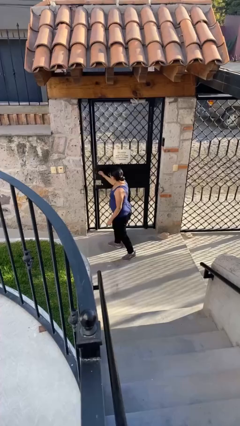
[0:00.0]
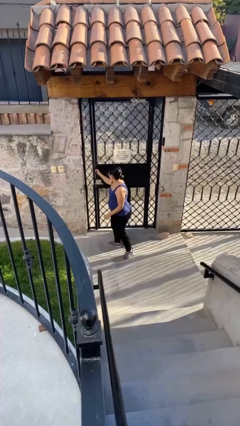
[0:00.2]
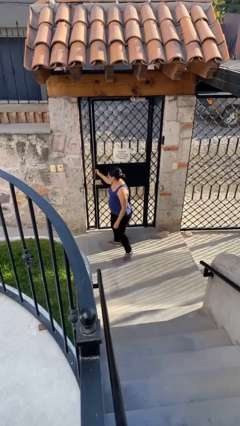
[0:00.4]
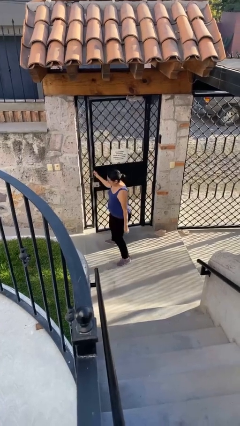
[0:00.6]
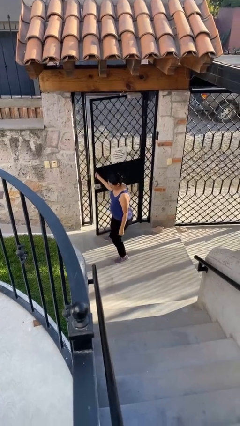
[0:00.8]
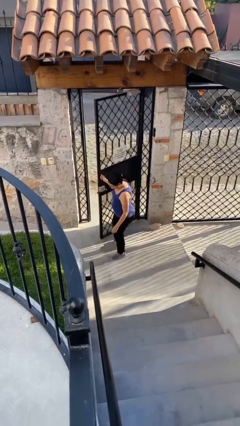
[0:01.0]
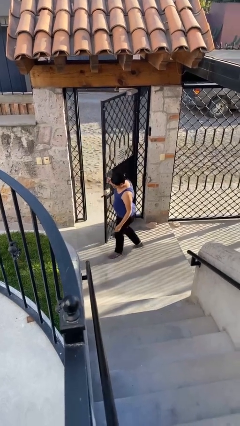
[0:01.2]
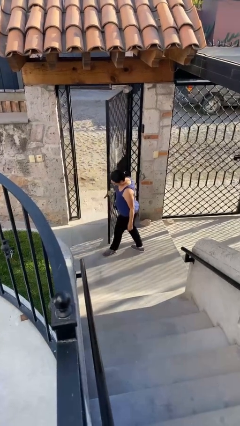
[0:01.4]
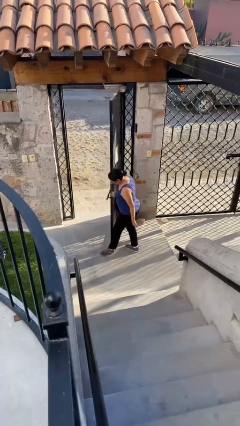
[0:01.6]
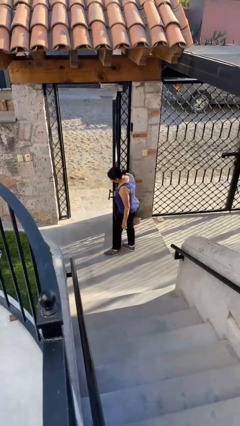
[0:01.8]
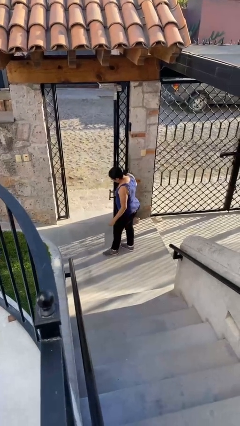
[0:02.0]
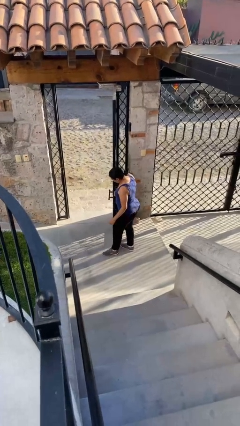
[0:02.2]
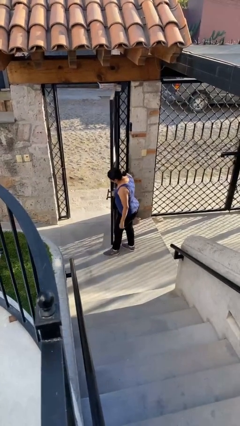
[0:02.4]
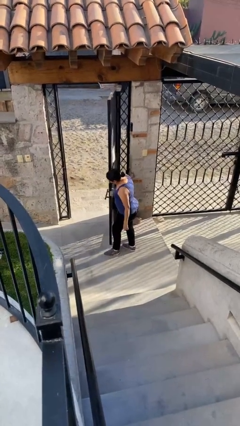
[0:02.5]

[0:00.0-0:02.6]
person opens facility door

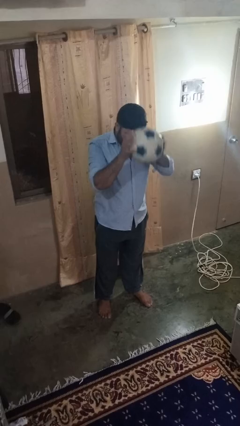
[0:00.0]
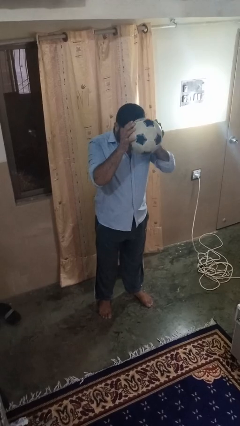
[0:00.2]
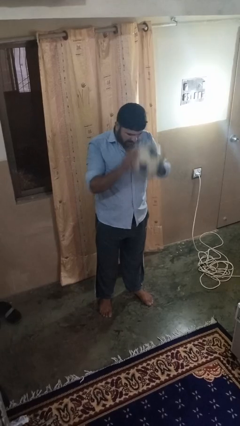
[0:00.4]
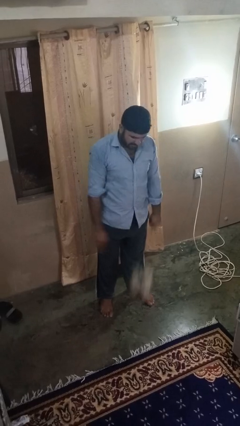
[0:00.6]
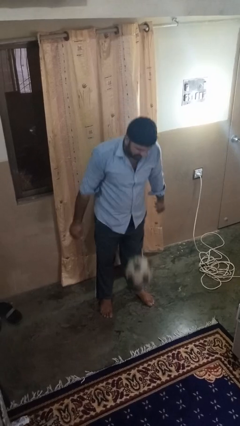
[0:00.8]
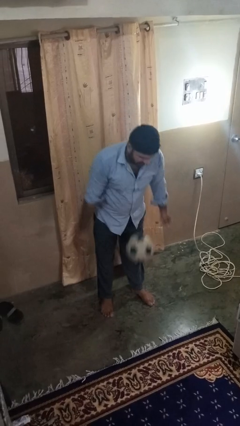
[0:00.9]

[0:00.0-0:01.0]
person bounces ball on floor

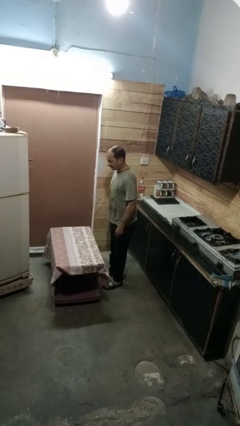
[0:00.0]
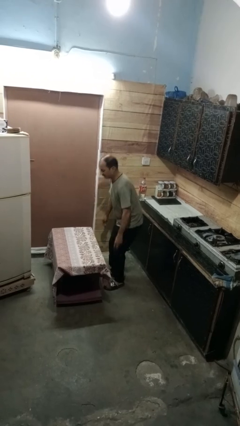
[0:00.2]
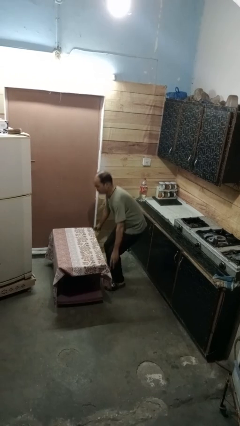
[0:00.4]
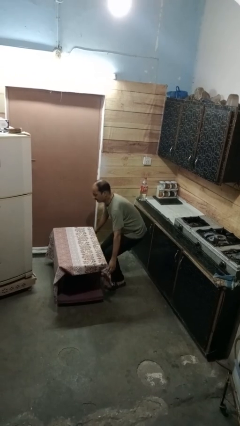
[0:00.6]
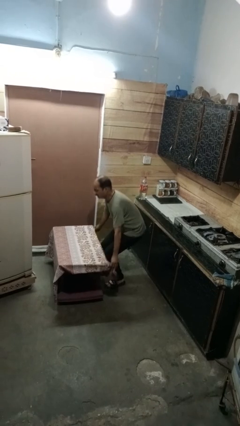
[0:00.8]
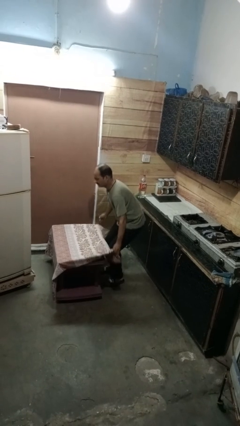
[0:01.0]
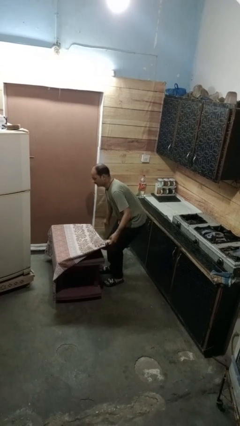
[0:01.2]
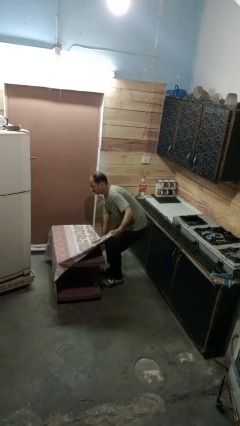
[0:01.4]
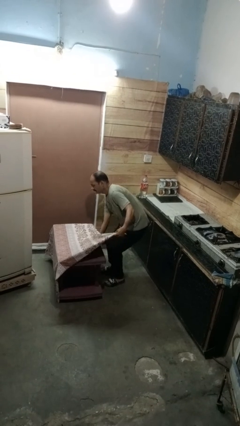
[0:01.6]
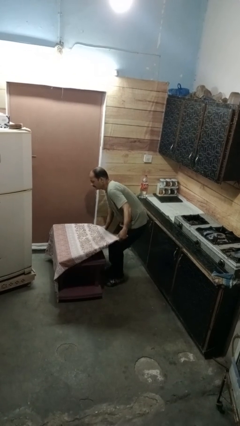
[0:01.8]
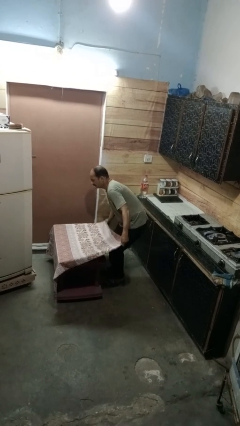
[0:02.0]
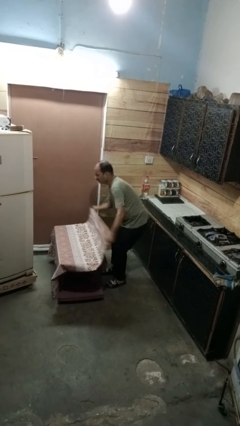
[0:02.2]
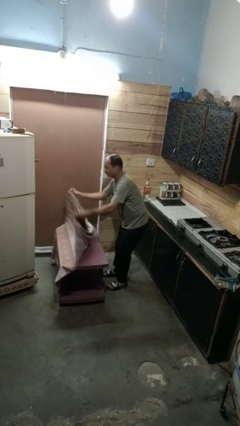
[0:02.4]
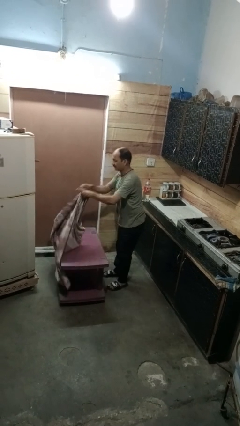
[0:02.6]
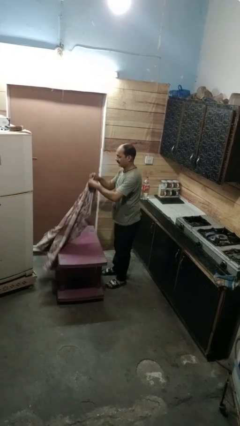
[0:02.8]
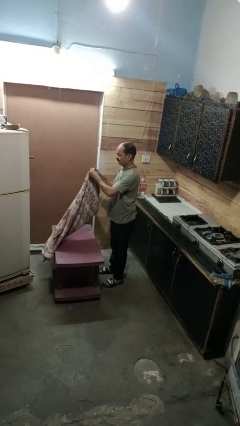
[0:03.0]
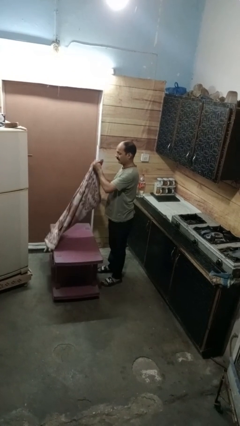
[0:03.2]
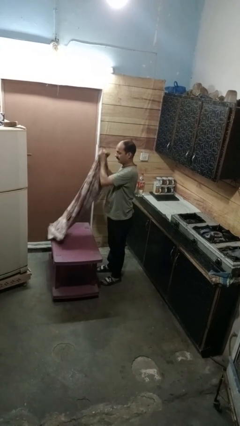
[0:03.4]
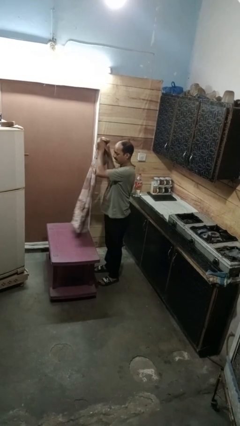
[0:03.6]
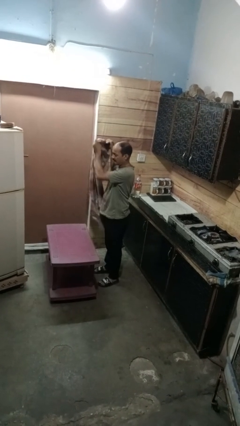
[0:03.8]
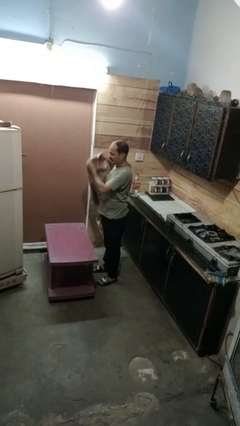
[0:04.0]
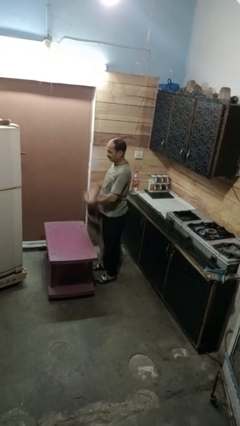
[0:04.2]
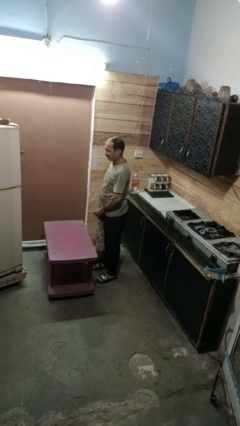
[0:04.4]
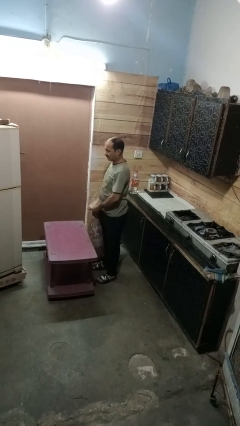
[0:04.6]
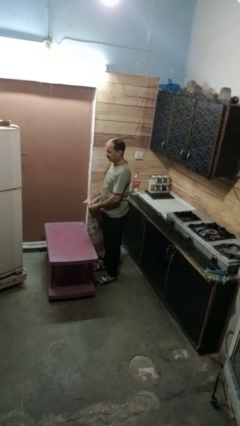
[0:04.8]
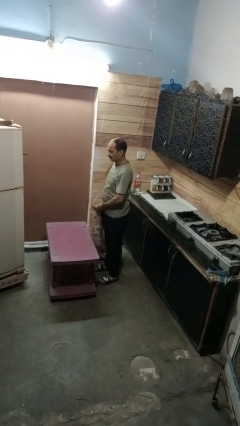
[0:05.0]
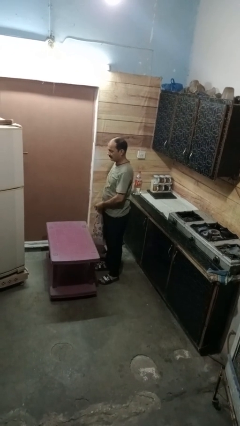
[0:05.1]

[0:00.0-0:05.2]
person folds tablecloth

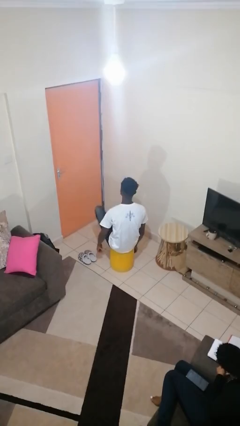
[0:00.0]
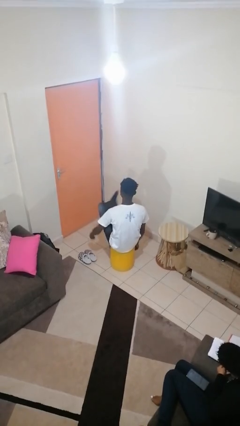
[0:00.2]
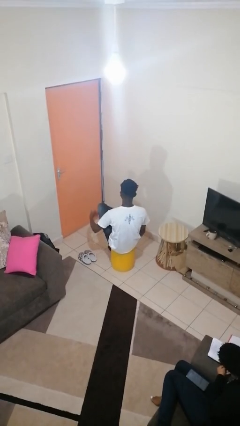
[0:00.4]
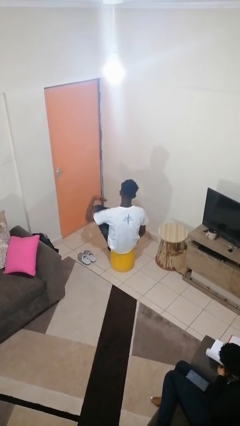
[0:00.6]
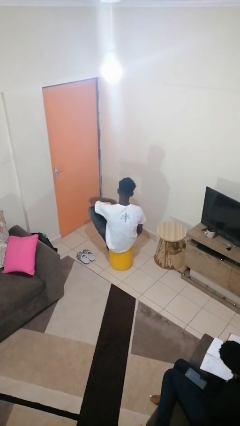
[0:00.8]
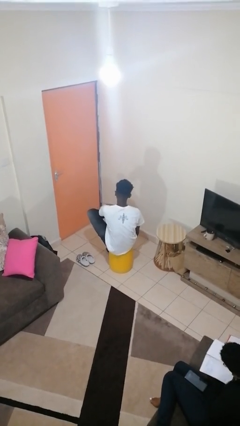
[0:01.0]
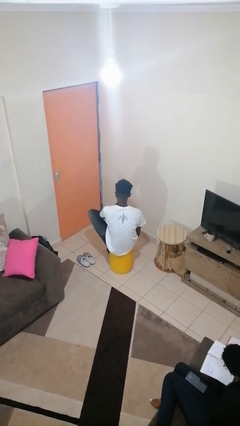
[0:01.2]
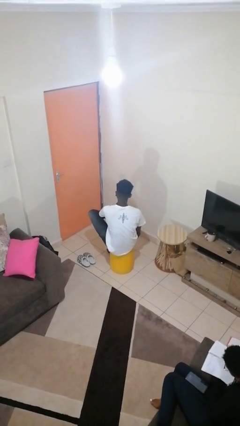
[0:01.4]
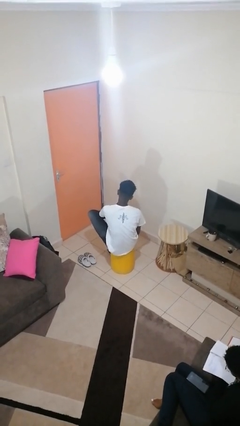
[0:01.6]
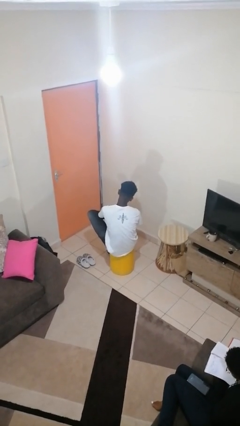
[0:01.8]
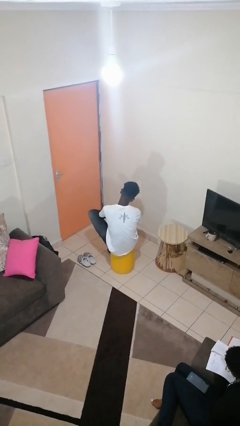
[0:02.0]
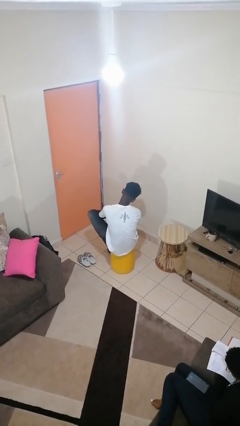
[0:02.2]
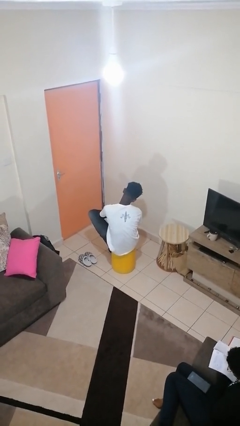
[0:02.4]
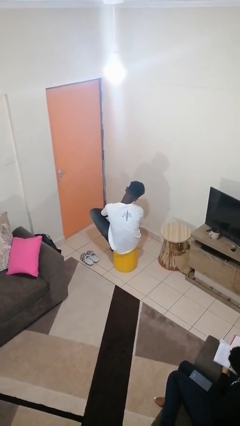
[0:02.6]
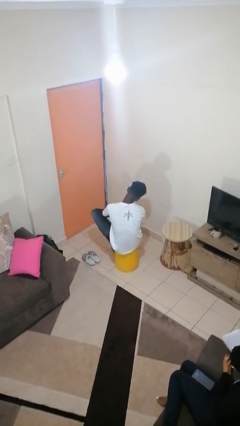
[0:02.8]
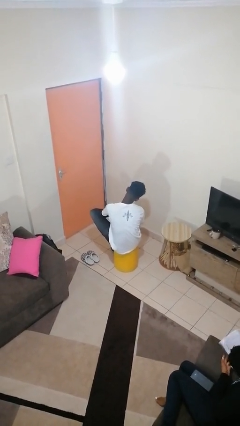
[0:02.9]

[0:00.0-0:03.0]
person rubs foot

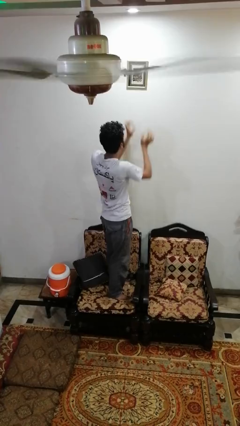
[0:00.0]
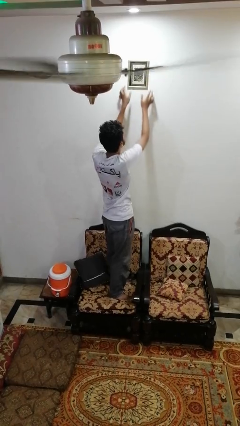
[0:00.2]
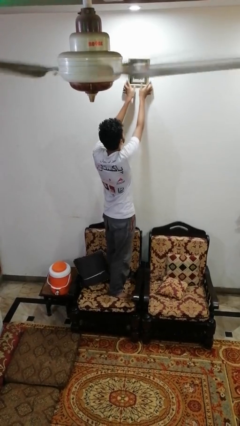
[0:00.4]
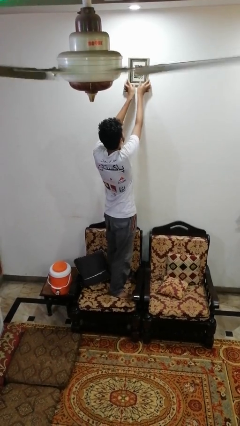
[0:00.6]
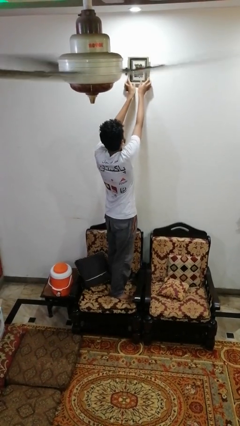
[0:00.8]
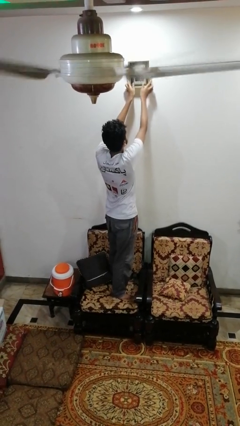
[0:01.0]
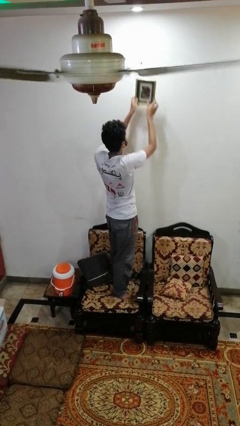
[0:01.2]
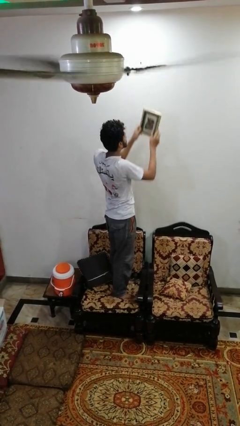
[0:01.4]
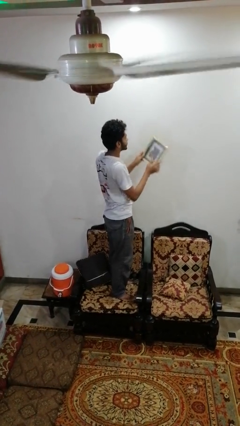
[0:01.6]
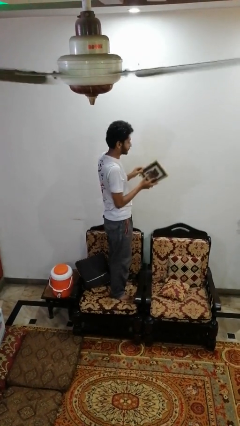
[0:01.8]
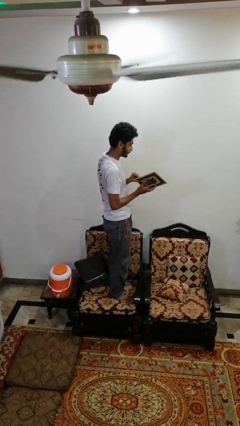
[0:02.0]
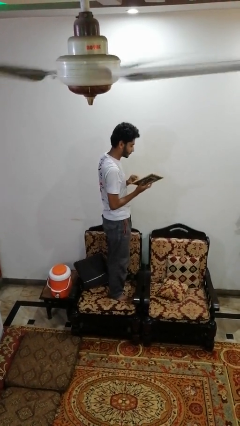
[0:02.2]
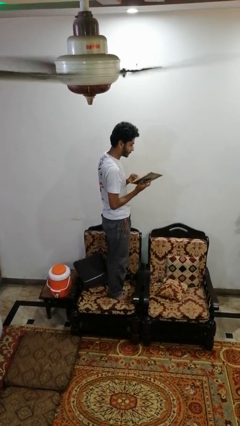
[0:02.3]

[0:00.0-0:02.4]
person takes down picture frame

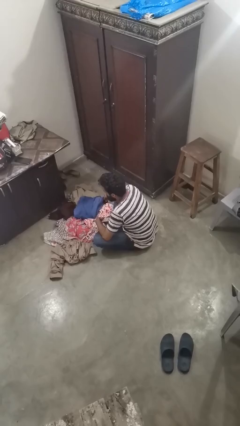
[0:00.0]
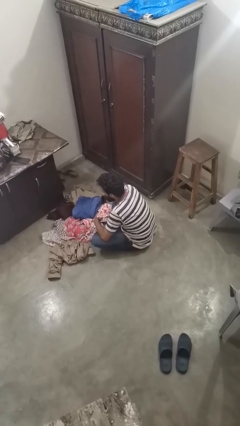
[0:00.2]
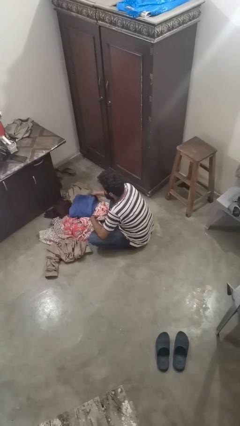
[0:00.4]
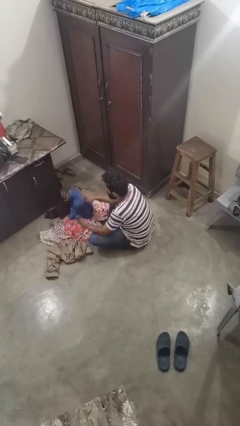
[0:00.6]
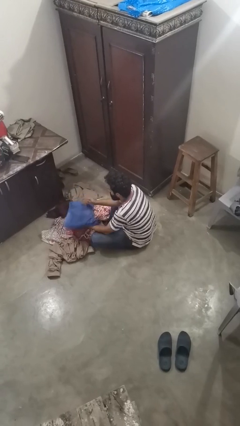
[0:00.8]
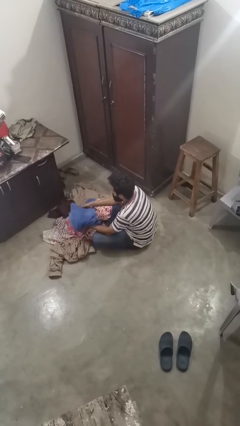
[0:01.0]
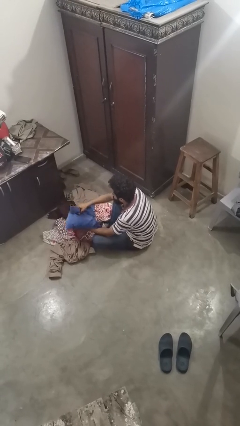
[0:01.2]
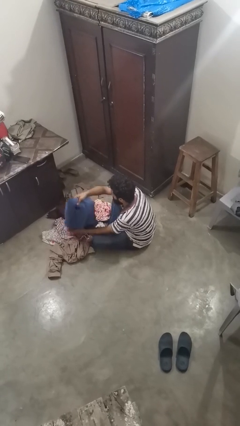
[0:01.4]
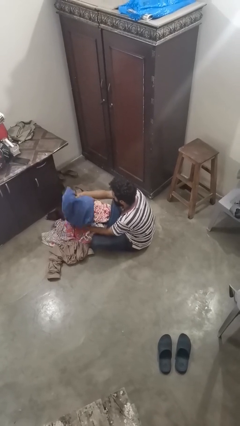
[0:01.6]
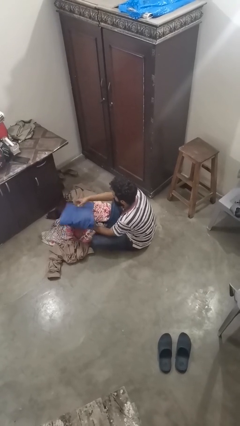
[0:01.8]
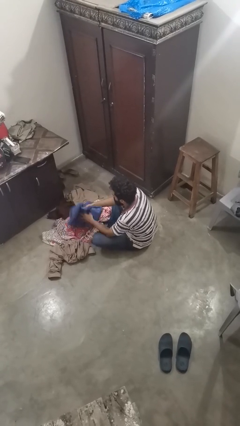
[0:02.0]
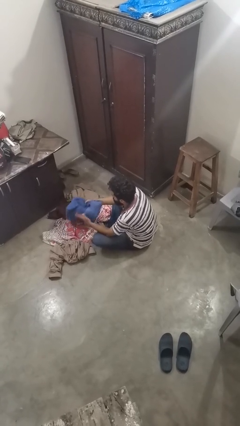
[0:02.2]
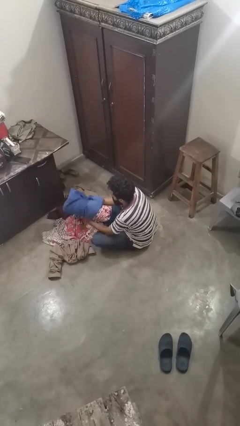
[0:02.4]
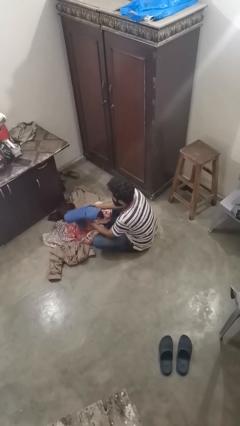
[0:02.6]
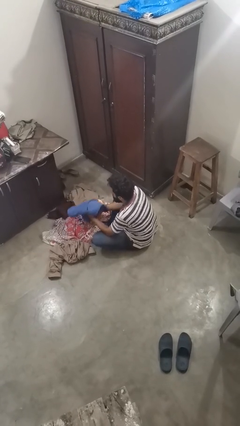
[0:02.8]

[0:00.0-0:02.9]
person folds pants

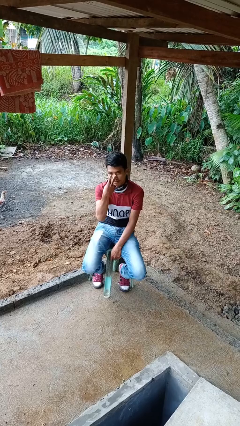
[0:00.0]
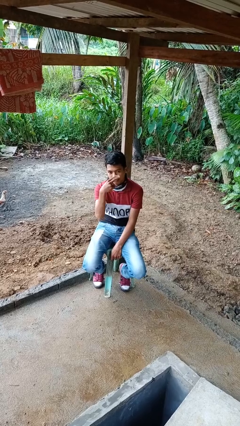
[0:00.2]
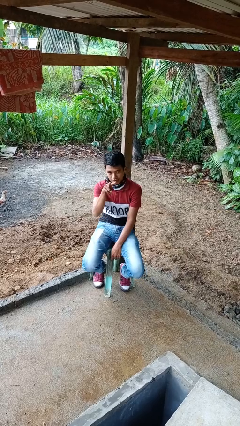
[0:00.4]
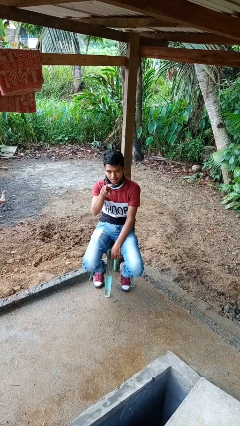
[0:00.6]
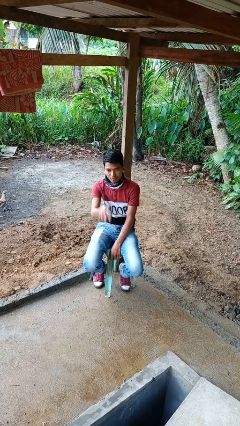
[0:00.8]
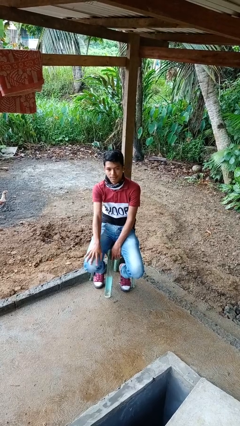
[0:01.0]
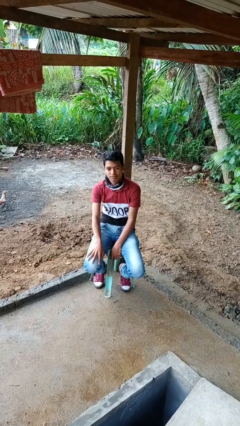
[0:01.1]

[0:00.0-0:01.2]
person gestures watch closely
